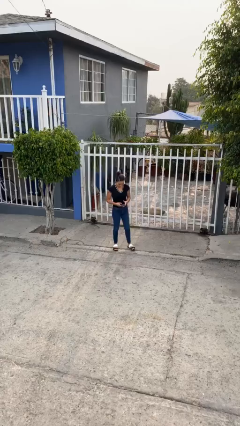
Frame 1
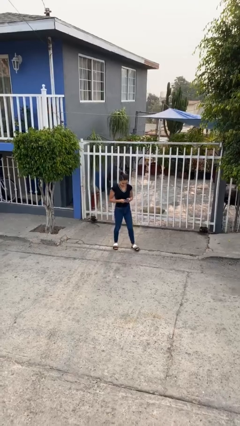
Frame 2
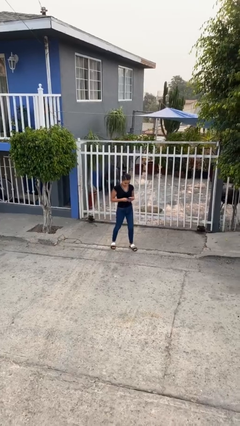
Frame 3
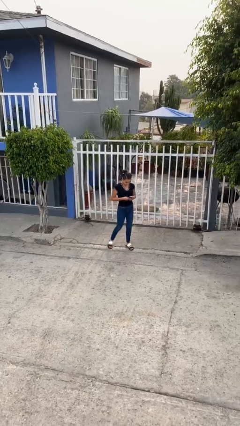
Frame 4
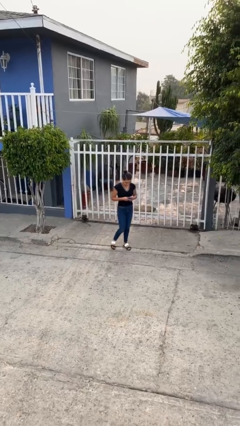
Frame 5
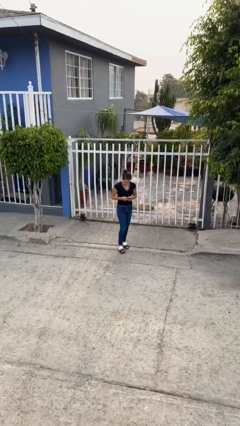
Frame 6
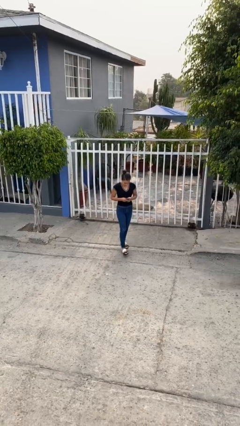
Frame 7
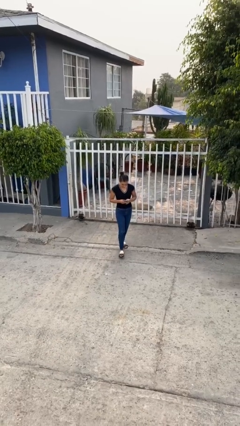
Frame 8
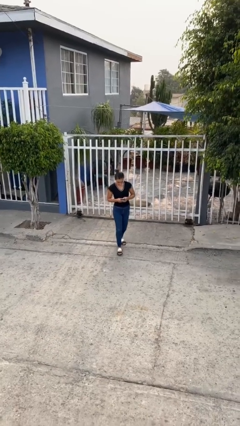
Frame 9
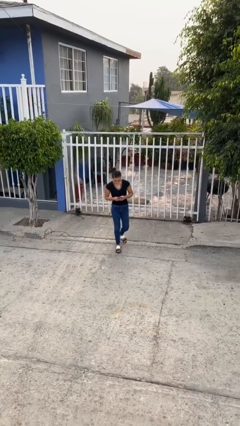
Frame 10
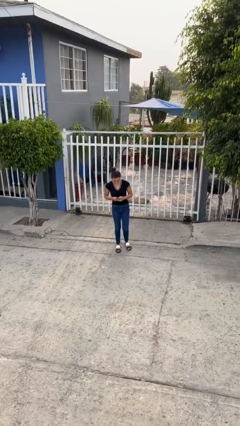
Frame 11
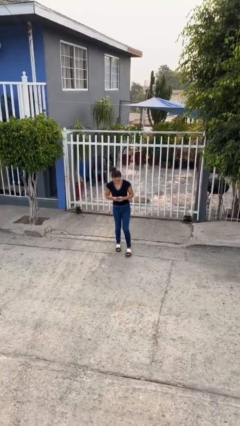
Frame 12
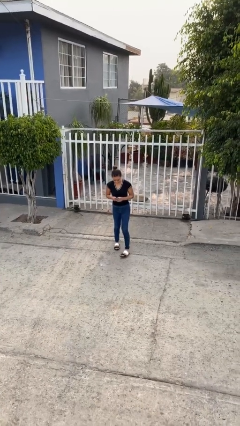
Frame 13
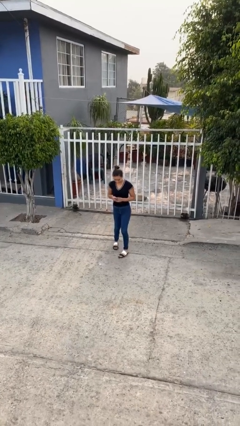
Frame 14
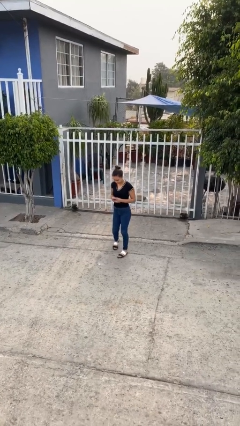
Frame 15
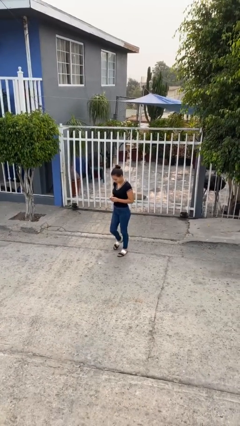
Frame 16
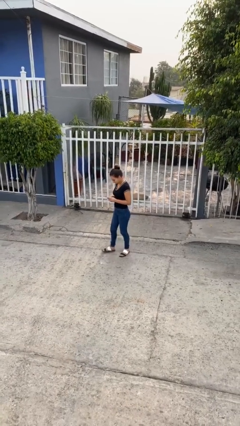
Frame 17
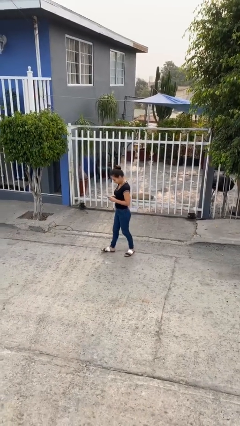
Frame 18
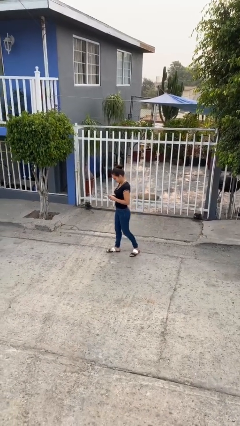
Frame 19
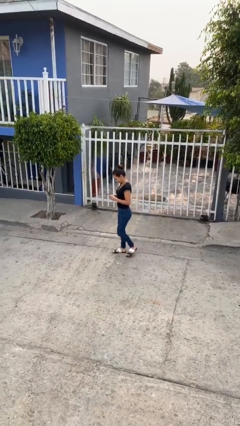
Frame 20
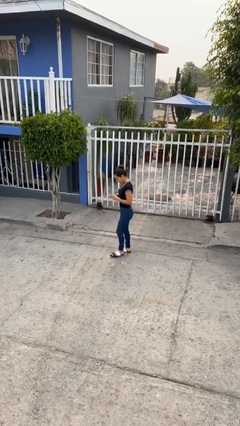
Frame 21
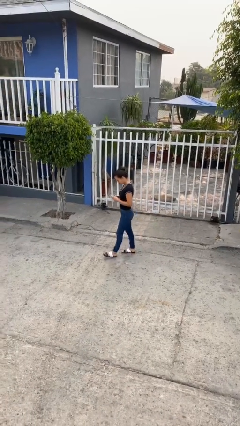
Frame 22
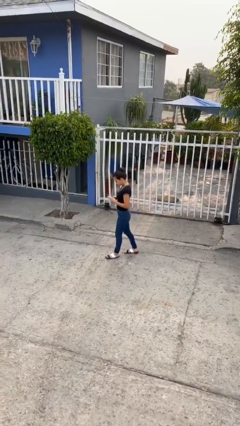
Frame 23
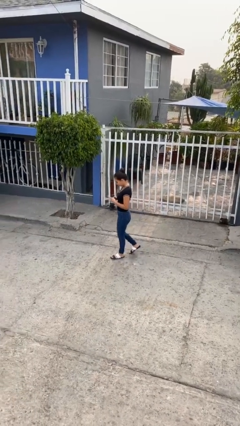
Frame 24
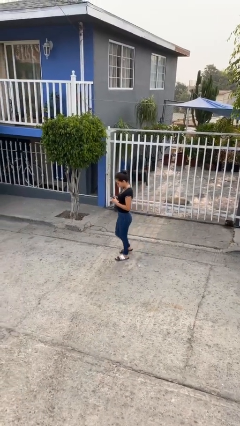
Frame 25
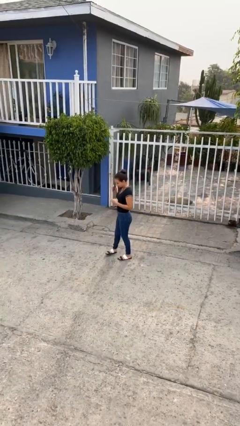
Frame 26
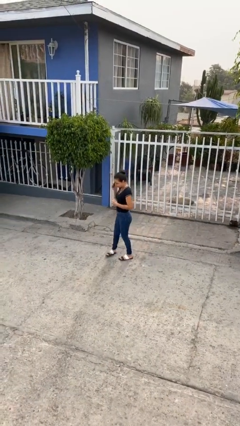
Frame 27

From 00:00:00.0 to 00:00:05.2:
person texts on phone

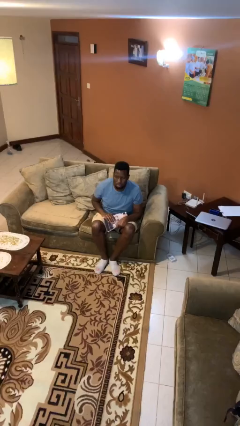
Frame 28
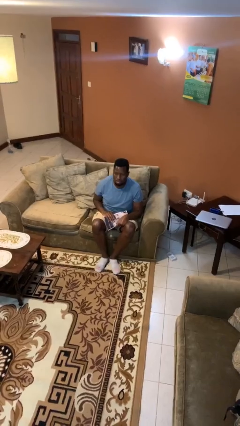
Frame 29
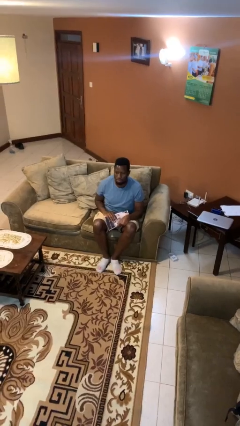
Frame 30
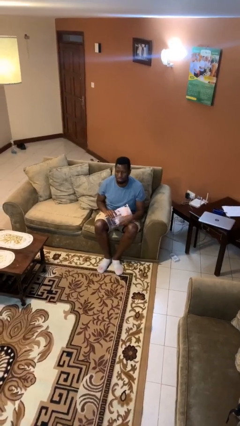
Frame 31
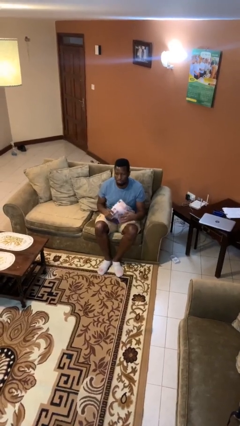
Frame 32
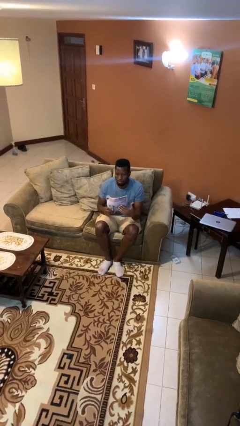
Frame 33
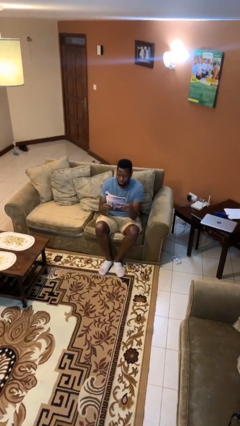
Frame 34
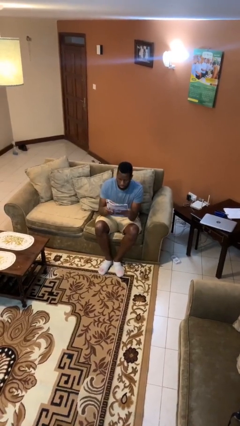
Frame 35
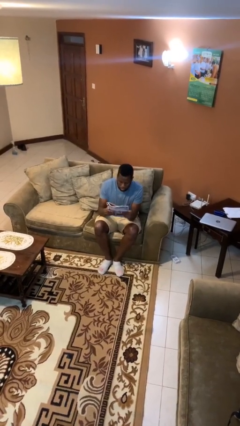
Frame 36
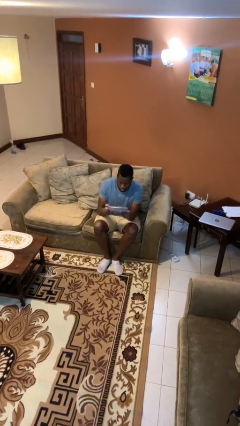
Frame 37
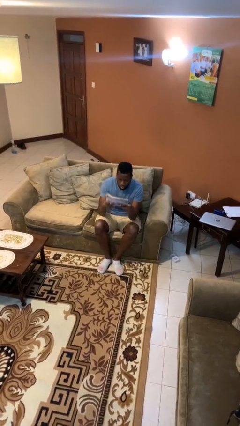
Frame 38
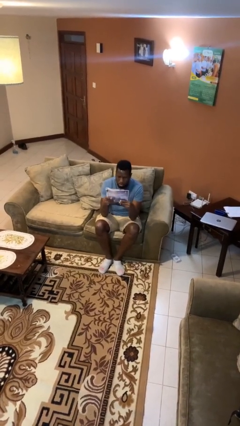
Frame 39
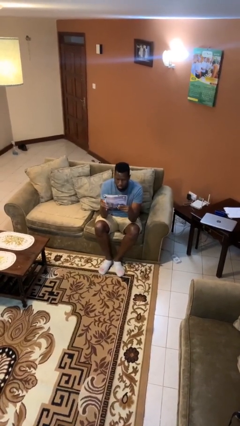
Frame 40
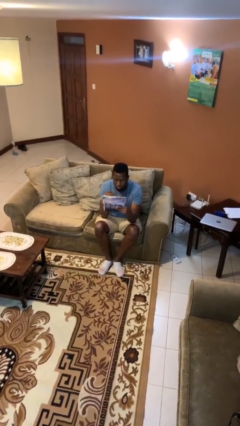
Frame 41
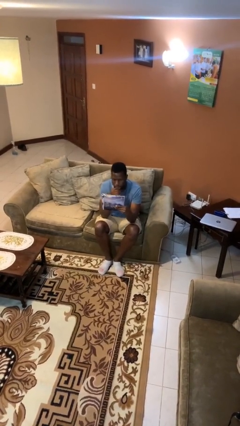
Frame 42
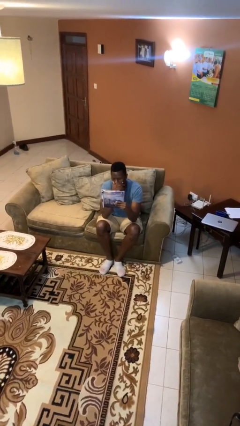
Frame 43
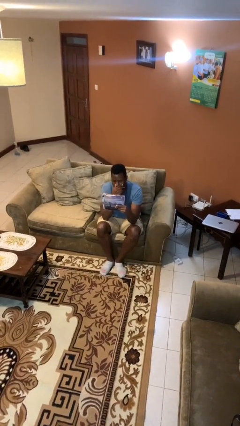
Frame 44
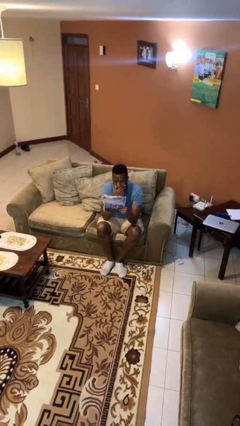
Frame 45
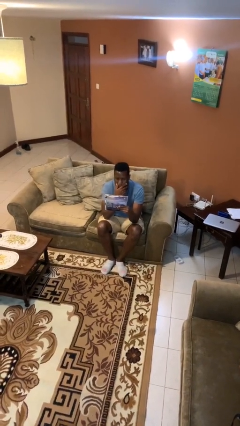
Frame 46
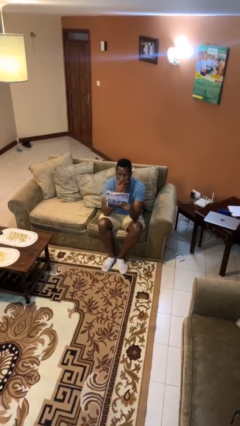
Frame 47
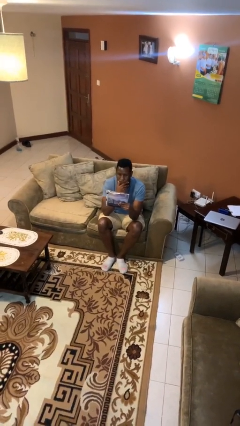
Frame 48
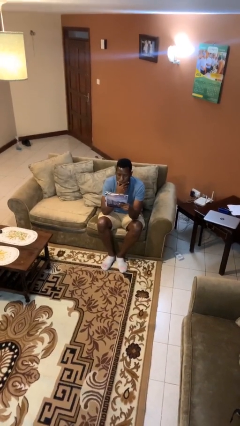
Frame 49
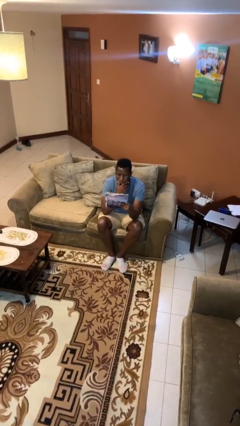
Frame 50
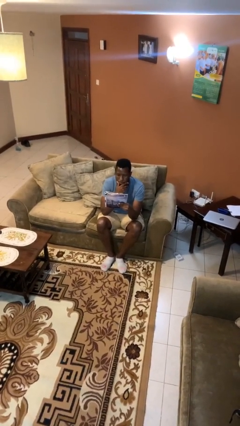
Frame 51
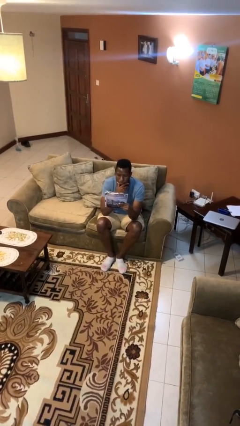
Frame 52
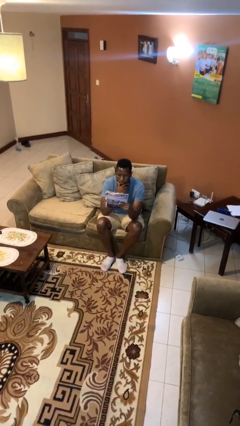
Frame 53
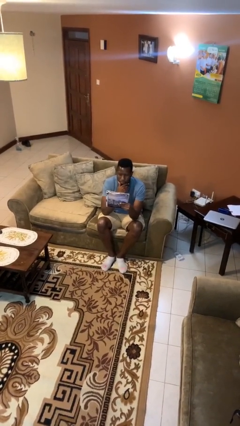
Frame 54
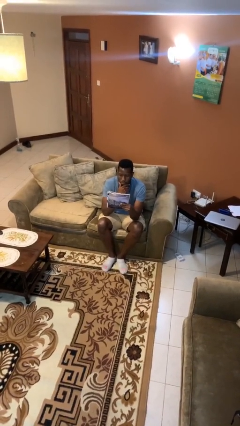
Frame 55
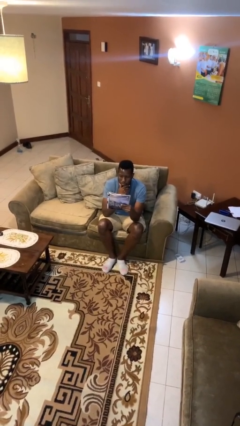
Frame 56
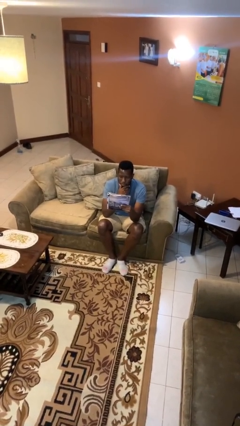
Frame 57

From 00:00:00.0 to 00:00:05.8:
person reads document

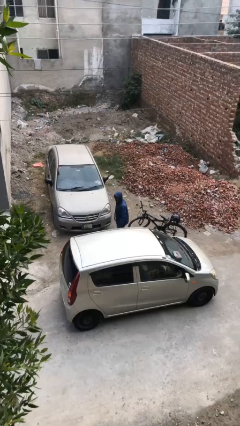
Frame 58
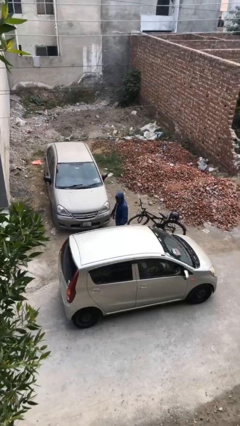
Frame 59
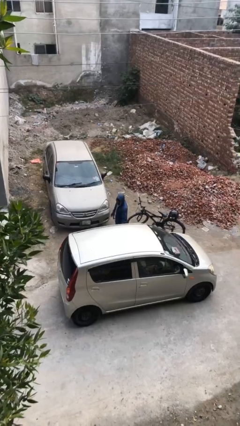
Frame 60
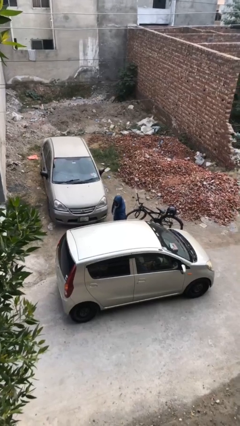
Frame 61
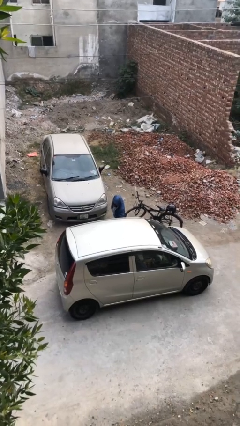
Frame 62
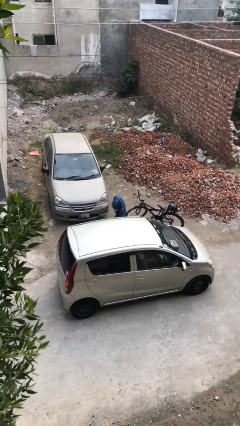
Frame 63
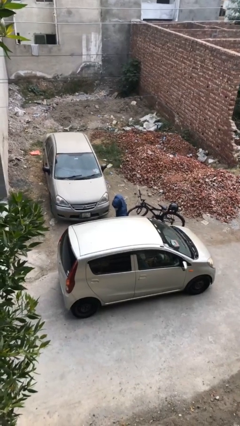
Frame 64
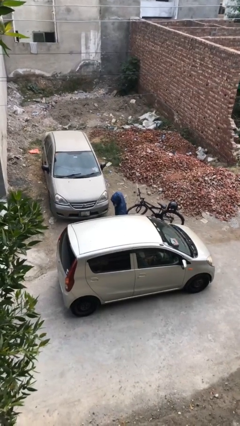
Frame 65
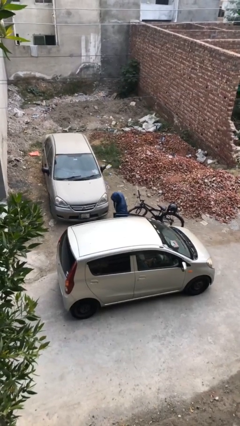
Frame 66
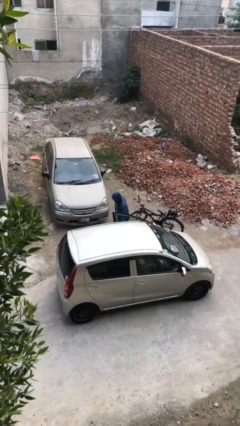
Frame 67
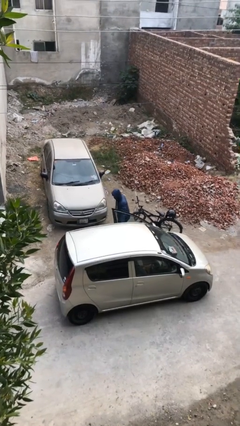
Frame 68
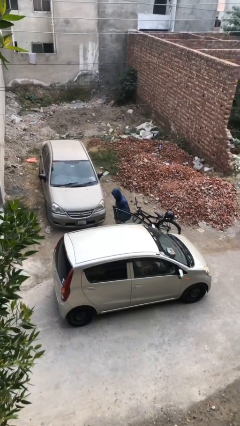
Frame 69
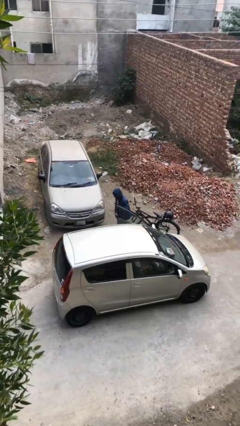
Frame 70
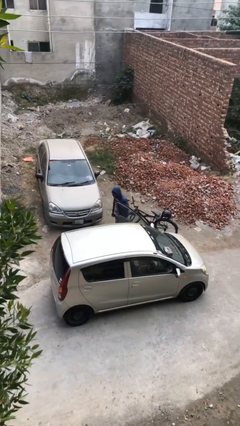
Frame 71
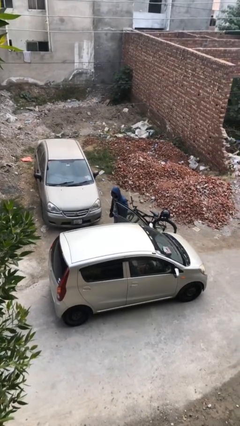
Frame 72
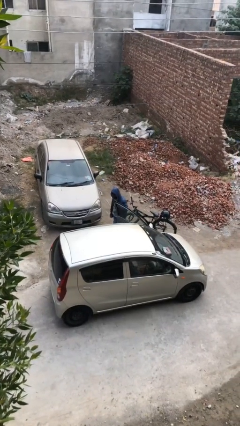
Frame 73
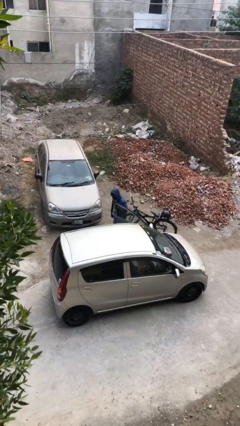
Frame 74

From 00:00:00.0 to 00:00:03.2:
person opens car door

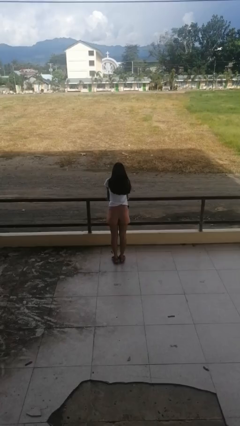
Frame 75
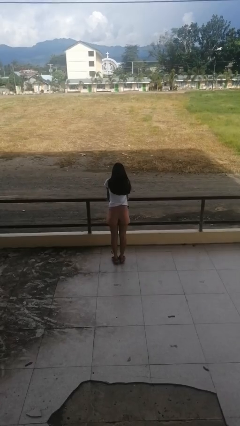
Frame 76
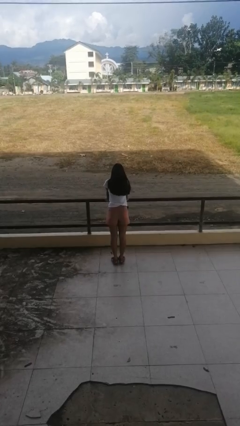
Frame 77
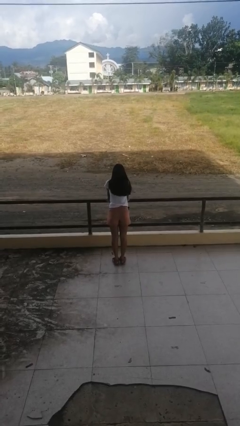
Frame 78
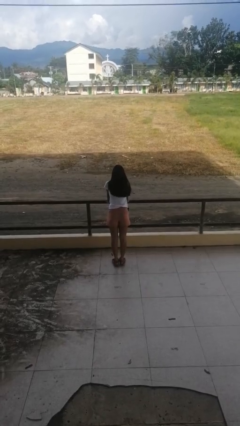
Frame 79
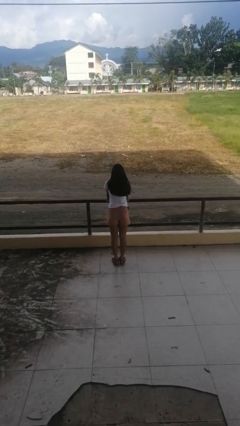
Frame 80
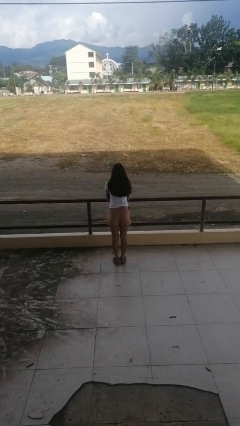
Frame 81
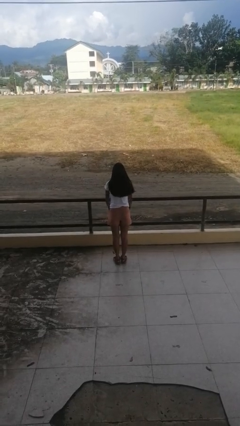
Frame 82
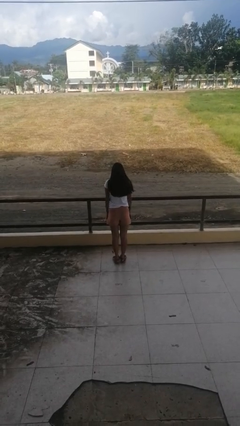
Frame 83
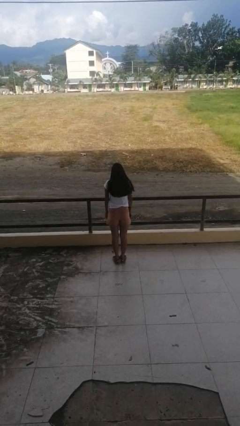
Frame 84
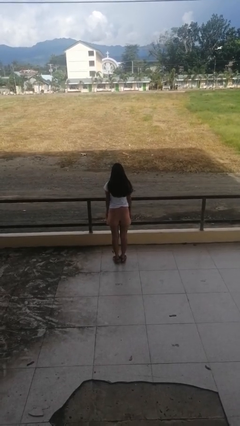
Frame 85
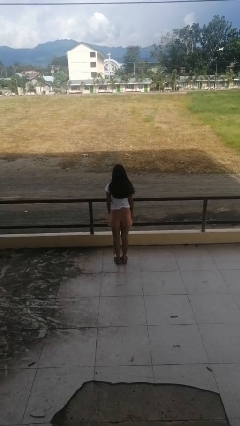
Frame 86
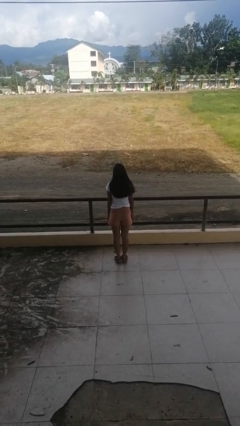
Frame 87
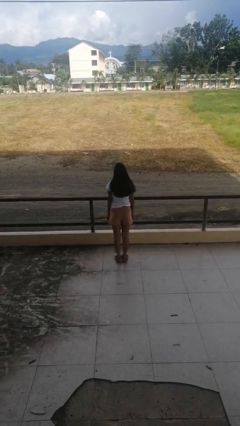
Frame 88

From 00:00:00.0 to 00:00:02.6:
person shrugs

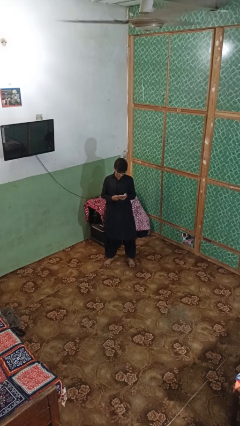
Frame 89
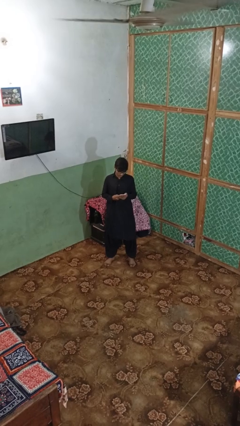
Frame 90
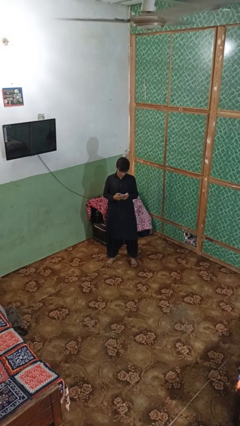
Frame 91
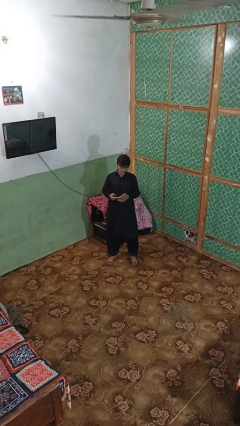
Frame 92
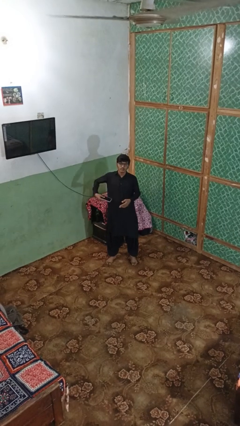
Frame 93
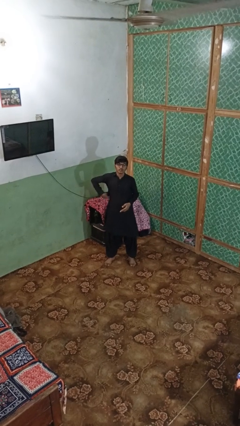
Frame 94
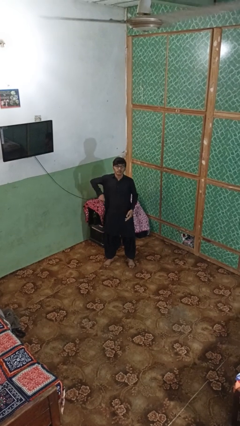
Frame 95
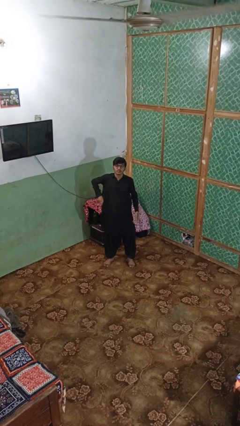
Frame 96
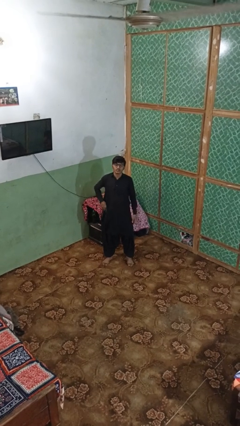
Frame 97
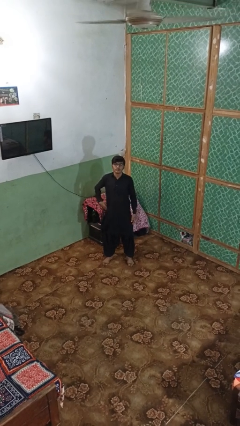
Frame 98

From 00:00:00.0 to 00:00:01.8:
person puts phone into pocket
